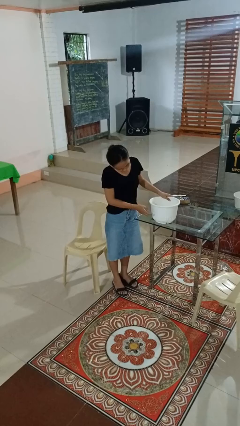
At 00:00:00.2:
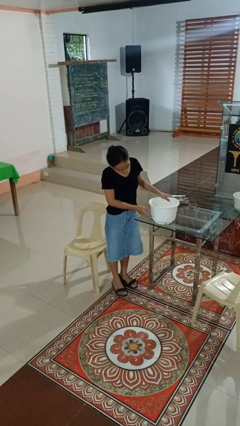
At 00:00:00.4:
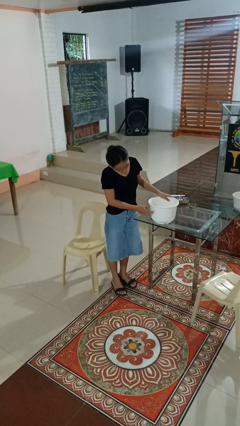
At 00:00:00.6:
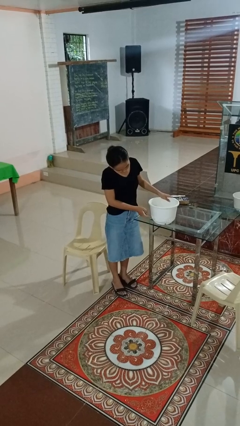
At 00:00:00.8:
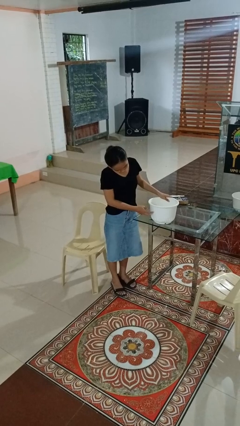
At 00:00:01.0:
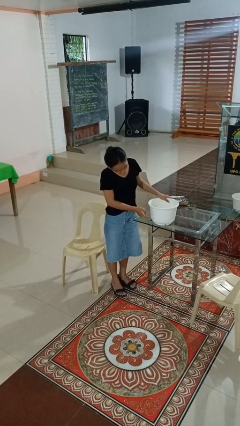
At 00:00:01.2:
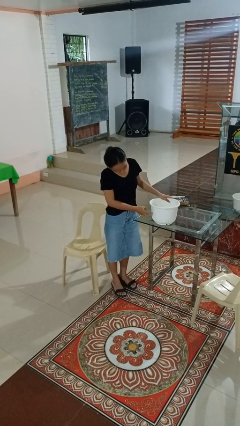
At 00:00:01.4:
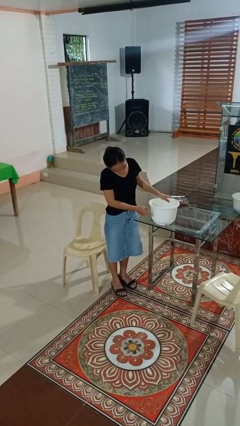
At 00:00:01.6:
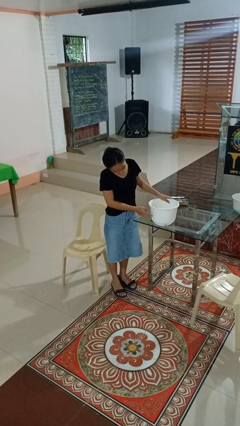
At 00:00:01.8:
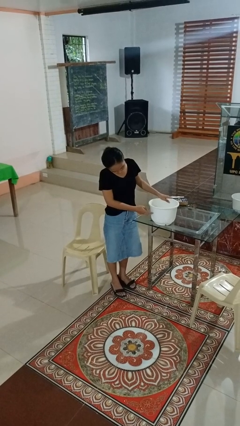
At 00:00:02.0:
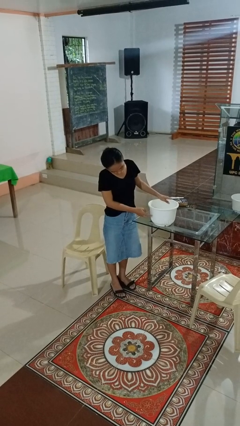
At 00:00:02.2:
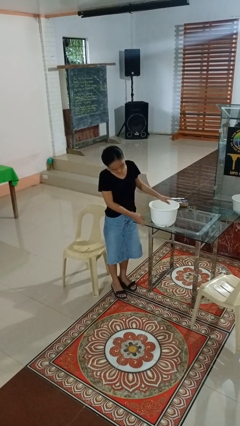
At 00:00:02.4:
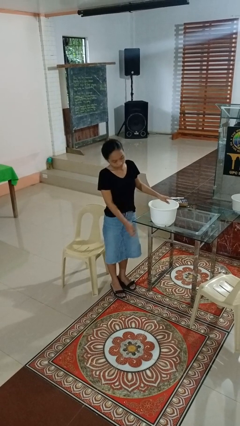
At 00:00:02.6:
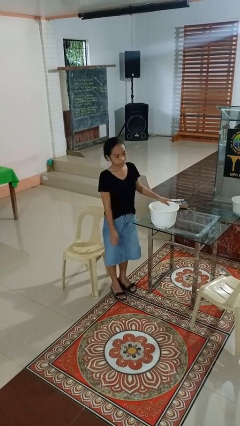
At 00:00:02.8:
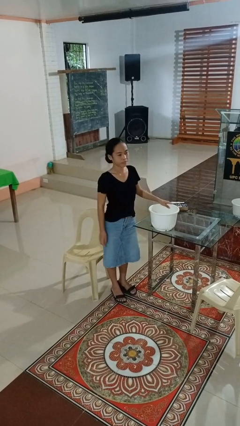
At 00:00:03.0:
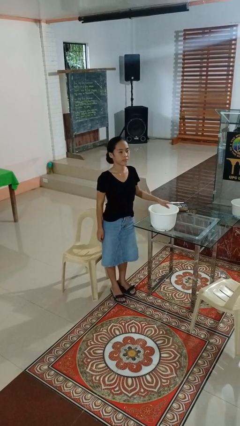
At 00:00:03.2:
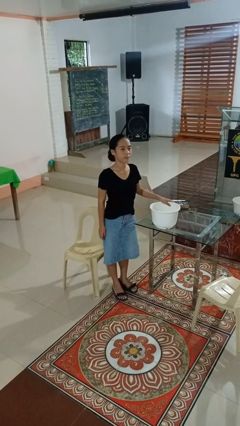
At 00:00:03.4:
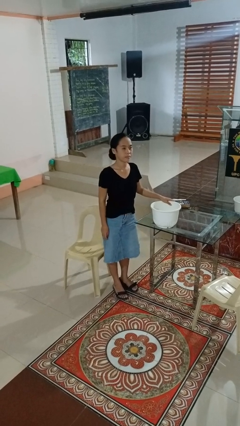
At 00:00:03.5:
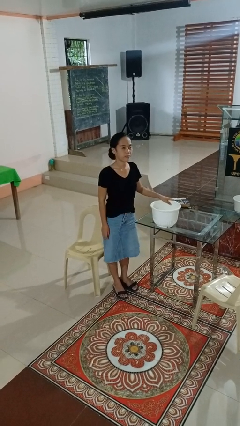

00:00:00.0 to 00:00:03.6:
person taps object with finger

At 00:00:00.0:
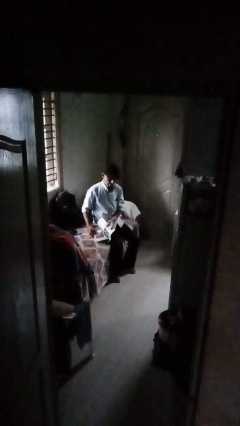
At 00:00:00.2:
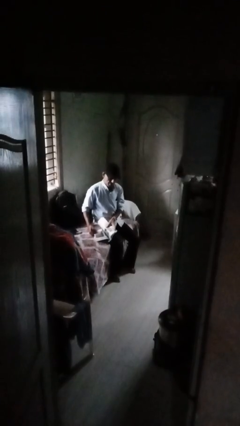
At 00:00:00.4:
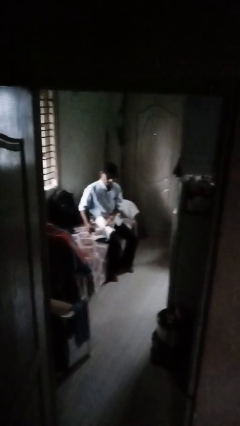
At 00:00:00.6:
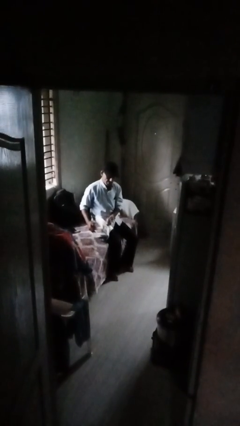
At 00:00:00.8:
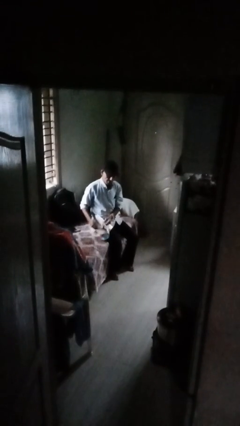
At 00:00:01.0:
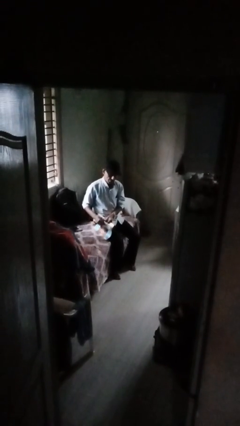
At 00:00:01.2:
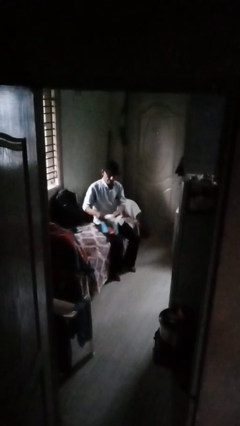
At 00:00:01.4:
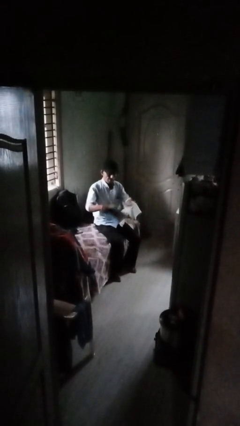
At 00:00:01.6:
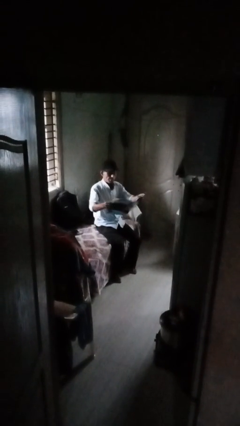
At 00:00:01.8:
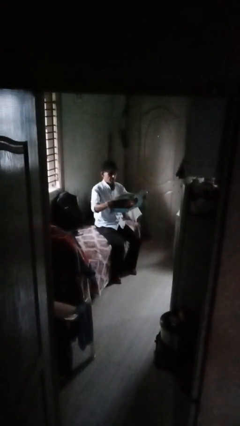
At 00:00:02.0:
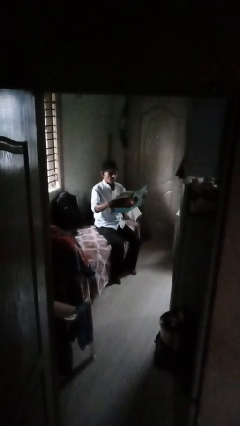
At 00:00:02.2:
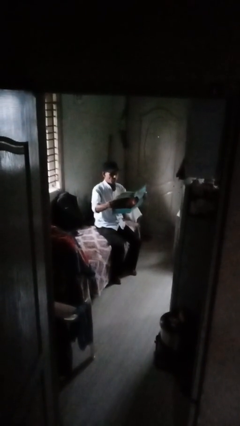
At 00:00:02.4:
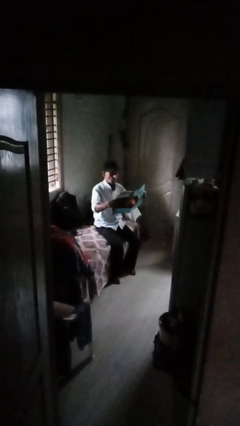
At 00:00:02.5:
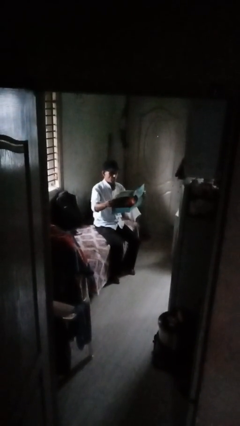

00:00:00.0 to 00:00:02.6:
person reads magazine

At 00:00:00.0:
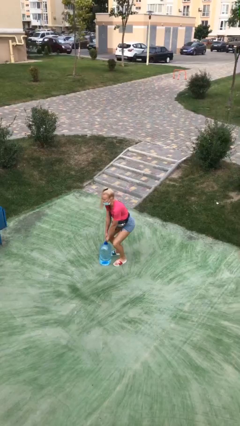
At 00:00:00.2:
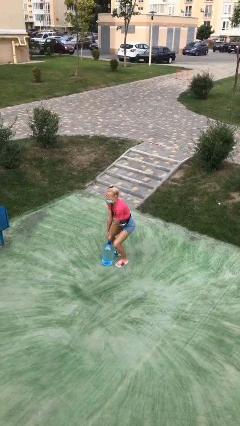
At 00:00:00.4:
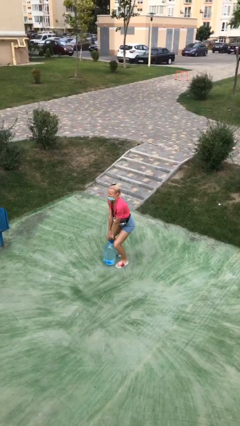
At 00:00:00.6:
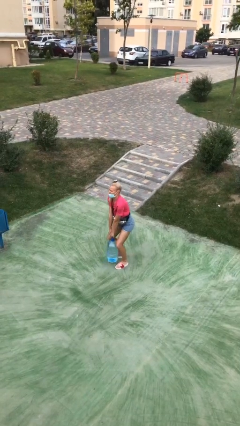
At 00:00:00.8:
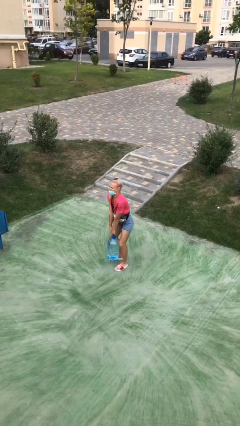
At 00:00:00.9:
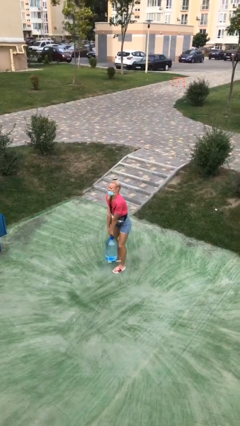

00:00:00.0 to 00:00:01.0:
person picks up object from floor

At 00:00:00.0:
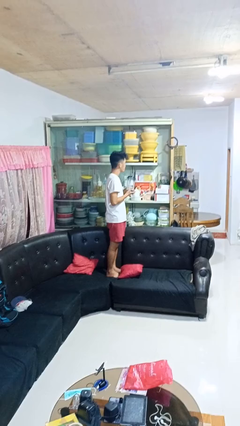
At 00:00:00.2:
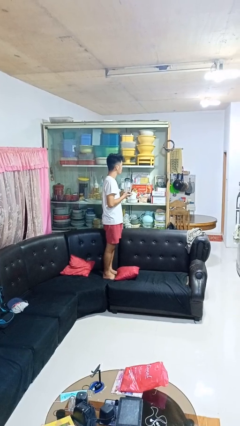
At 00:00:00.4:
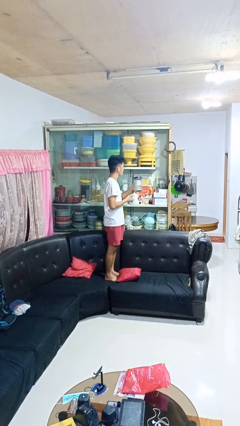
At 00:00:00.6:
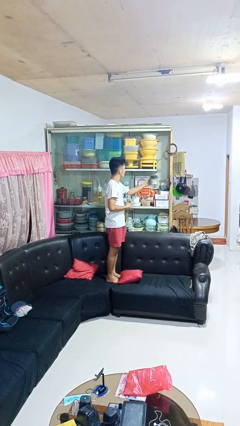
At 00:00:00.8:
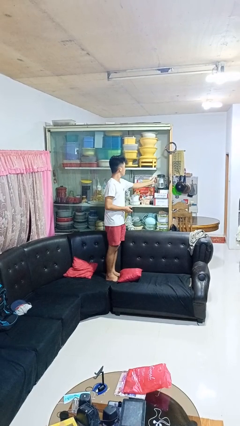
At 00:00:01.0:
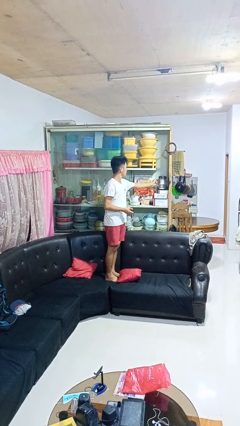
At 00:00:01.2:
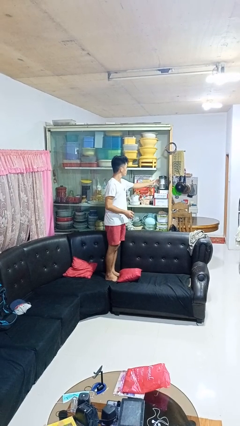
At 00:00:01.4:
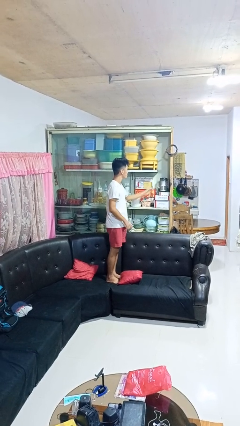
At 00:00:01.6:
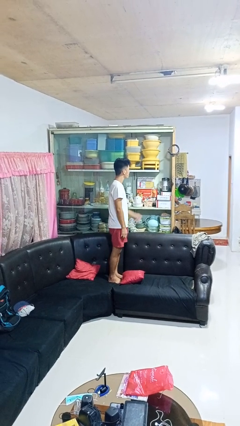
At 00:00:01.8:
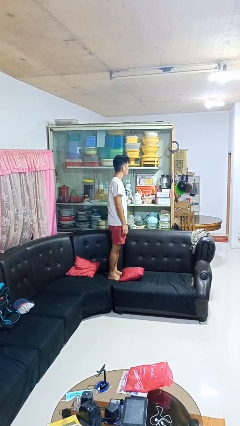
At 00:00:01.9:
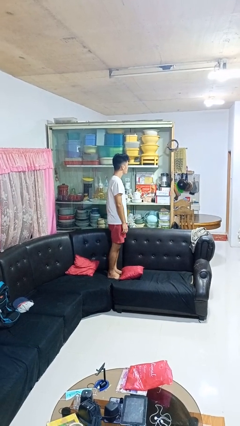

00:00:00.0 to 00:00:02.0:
person puts down object into cabinet

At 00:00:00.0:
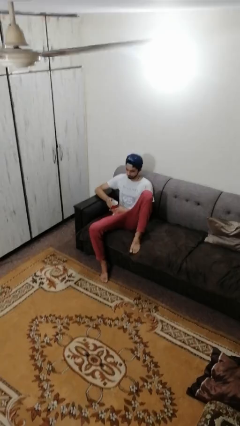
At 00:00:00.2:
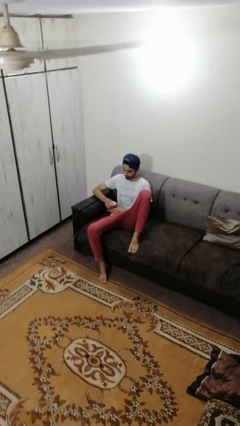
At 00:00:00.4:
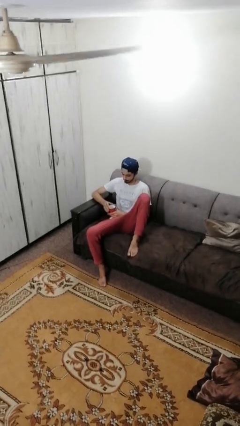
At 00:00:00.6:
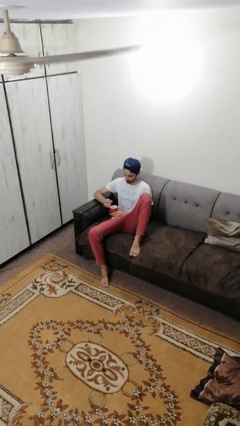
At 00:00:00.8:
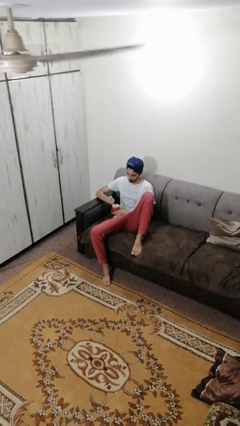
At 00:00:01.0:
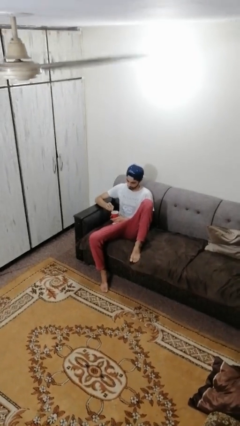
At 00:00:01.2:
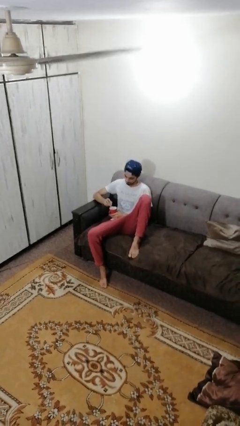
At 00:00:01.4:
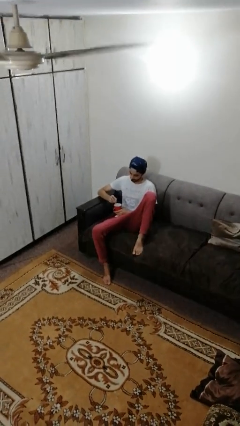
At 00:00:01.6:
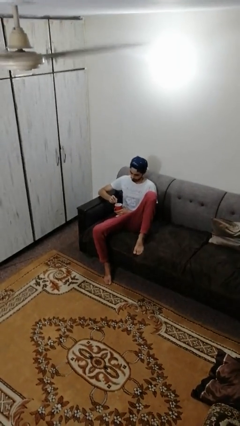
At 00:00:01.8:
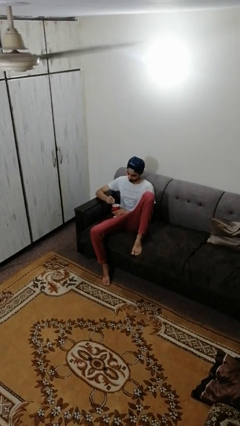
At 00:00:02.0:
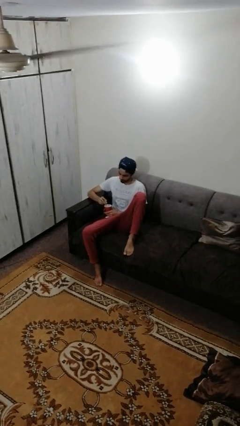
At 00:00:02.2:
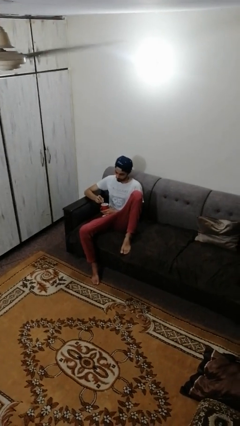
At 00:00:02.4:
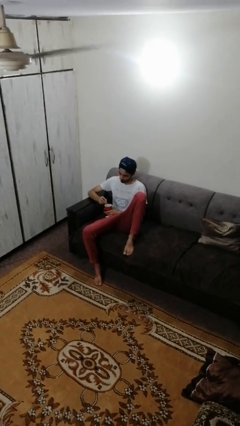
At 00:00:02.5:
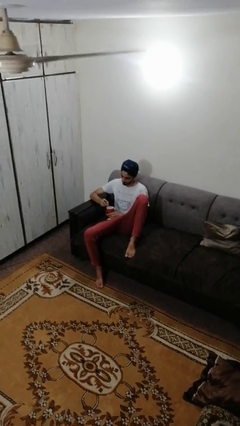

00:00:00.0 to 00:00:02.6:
person stirs mug

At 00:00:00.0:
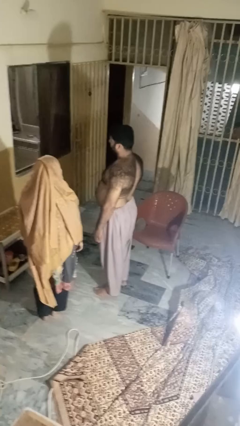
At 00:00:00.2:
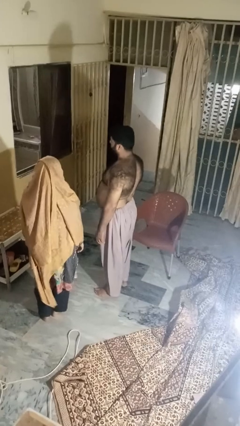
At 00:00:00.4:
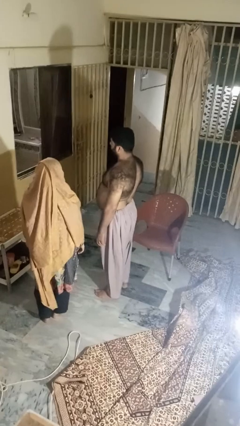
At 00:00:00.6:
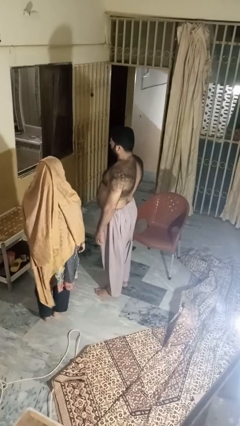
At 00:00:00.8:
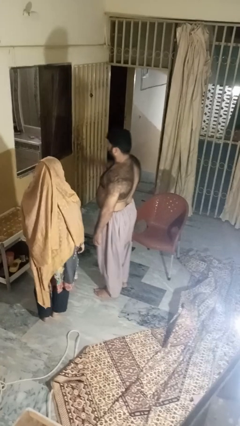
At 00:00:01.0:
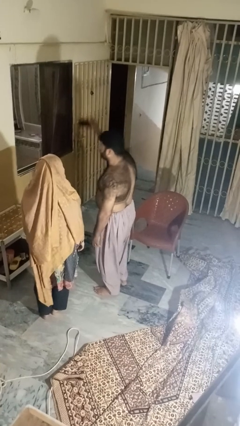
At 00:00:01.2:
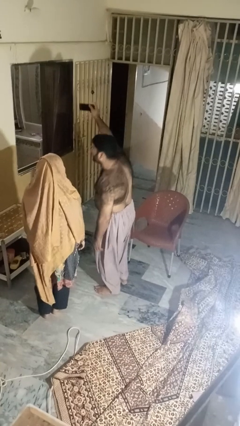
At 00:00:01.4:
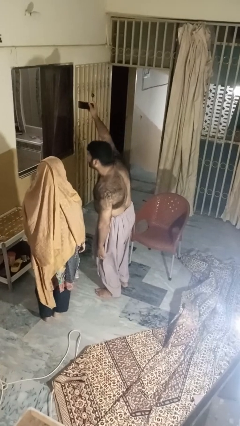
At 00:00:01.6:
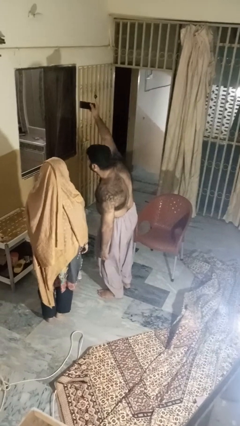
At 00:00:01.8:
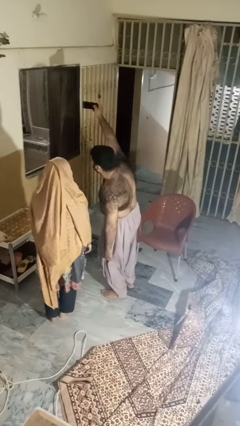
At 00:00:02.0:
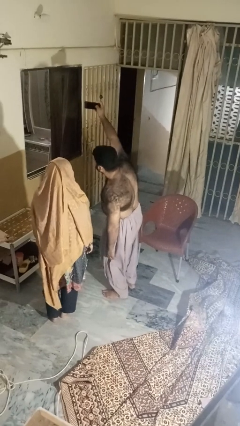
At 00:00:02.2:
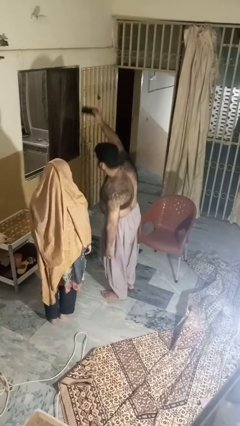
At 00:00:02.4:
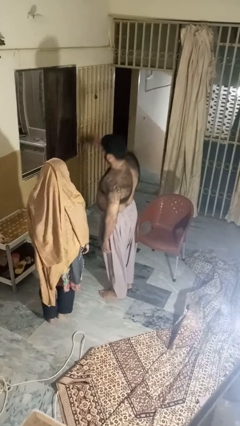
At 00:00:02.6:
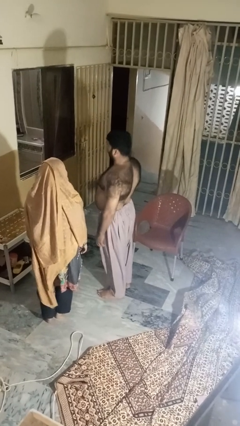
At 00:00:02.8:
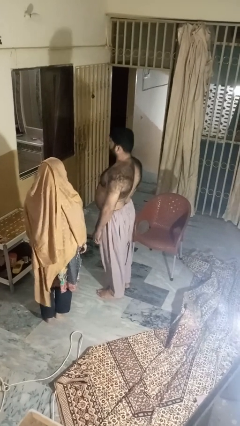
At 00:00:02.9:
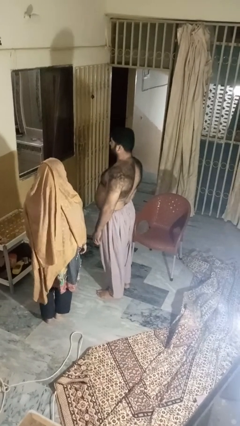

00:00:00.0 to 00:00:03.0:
person takes selfie with person

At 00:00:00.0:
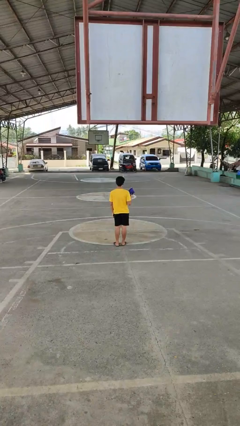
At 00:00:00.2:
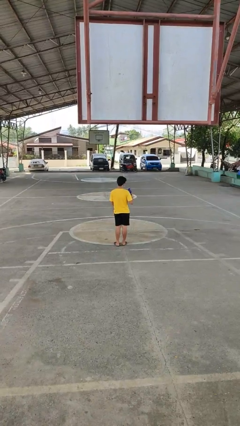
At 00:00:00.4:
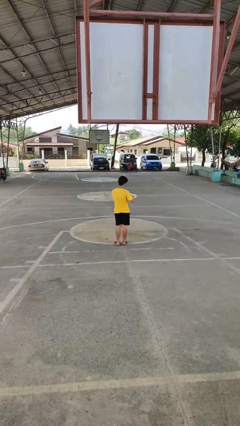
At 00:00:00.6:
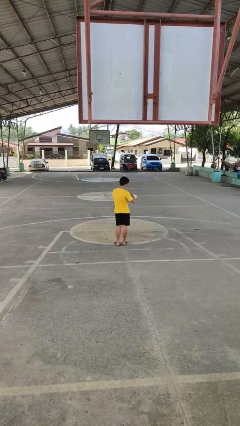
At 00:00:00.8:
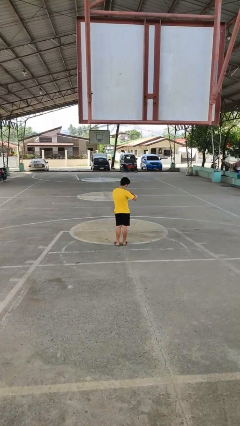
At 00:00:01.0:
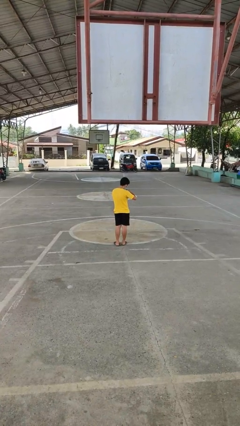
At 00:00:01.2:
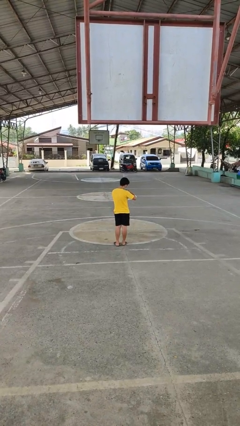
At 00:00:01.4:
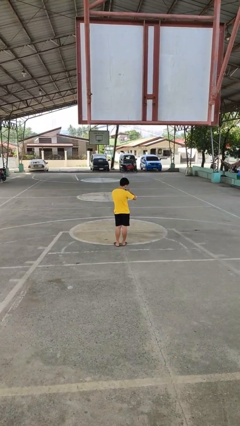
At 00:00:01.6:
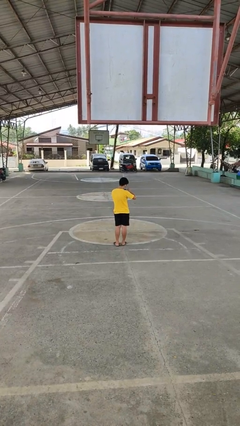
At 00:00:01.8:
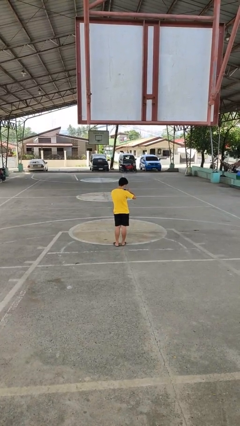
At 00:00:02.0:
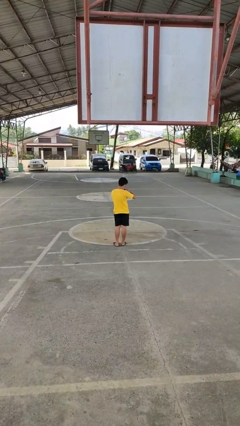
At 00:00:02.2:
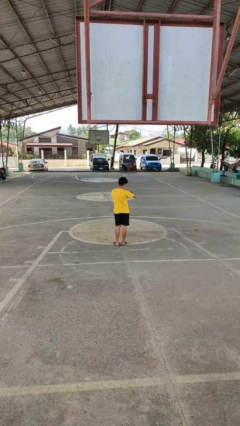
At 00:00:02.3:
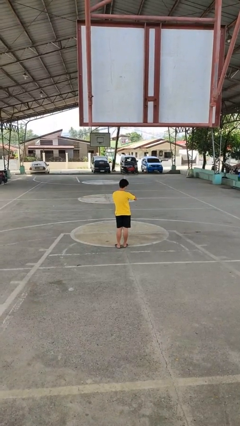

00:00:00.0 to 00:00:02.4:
person searches in purse
